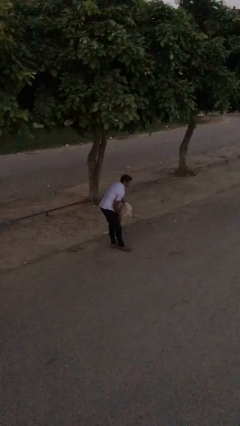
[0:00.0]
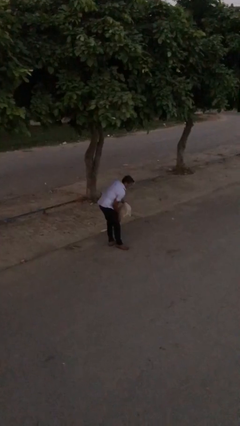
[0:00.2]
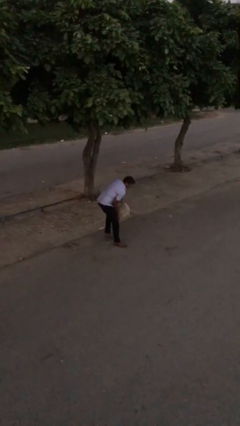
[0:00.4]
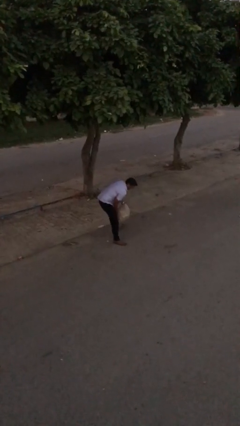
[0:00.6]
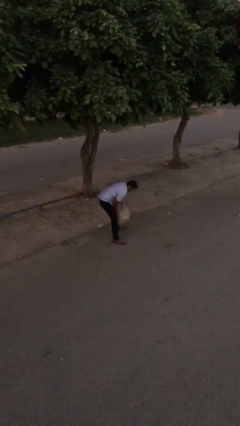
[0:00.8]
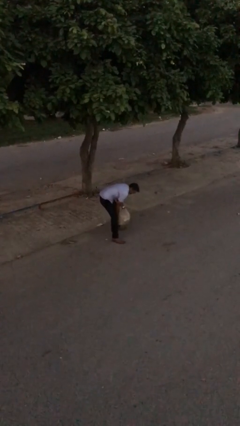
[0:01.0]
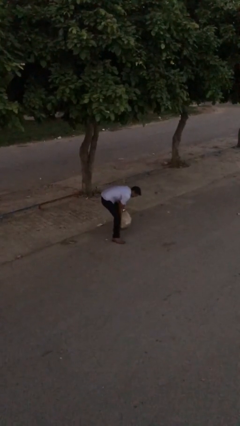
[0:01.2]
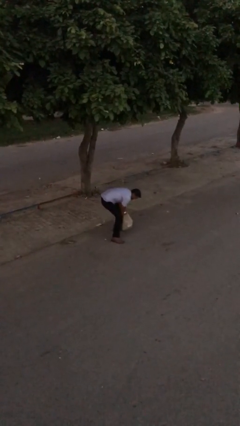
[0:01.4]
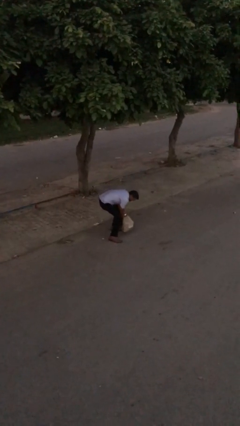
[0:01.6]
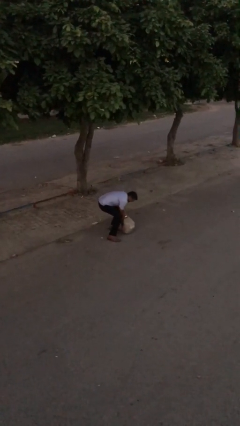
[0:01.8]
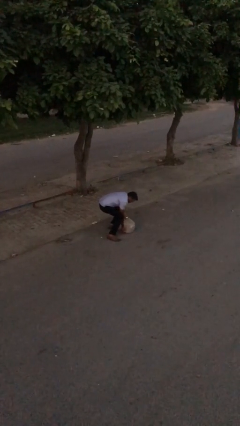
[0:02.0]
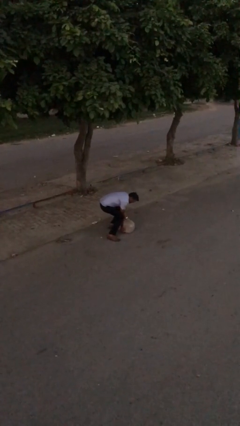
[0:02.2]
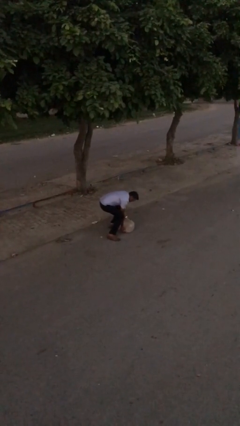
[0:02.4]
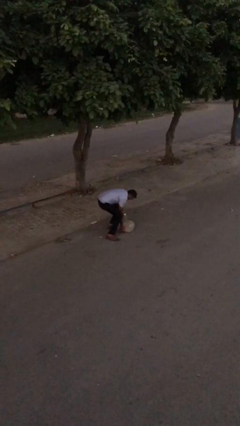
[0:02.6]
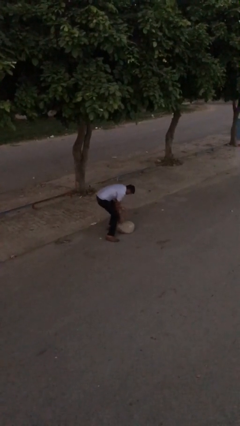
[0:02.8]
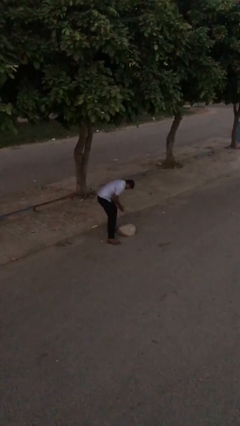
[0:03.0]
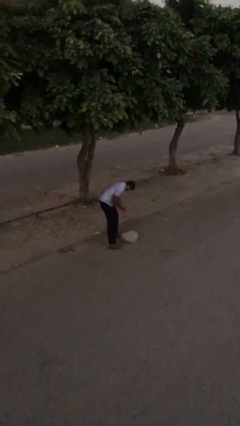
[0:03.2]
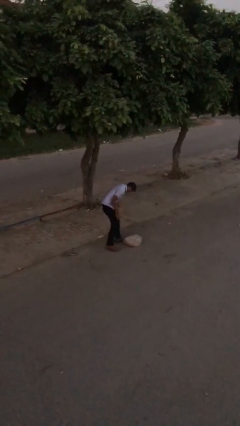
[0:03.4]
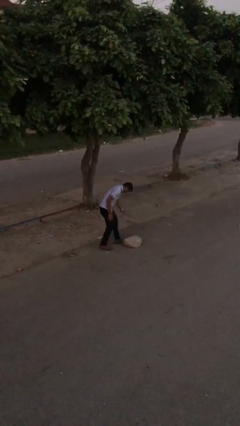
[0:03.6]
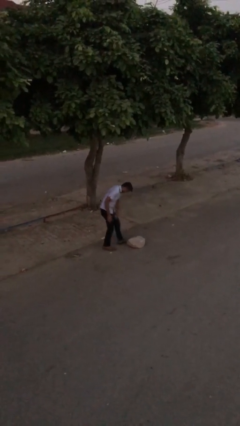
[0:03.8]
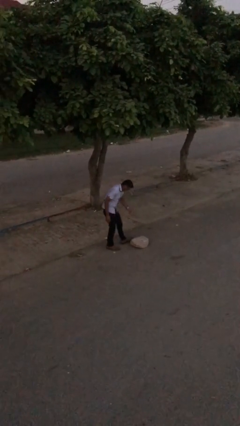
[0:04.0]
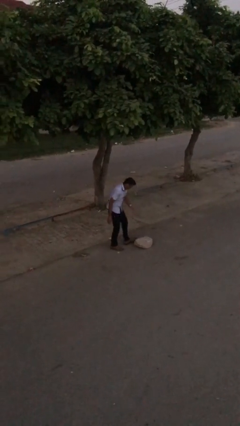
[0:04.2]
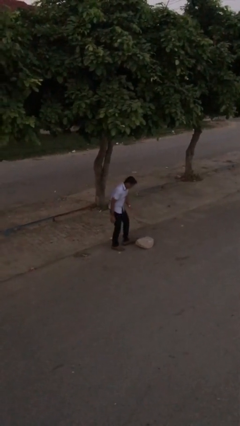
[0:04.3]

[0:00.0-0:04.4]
person puts down object on floor

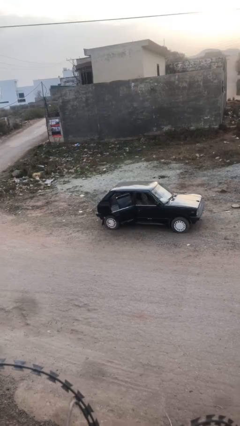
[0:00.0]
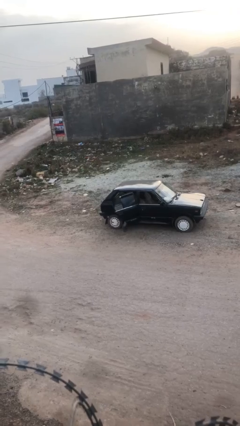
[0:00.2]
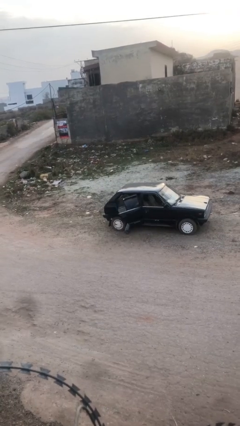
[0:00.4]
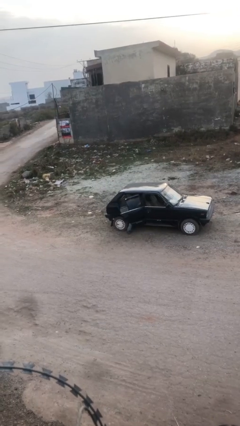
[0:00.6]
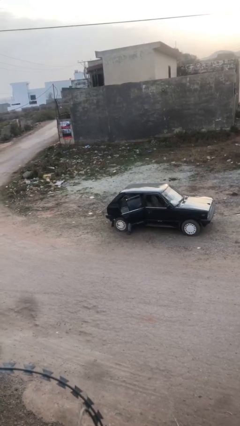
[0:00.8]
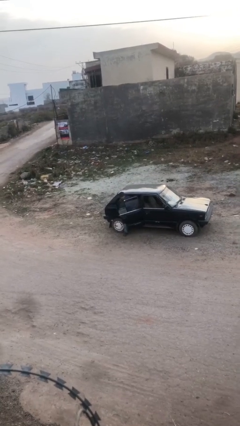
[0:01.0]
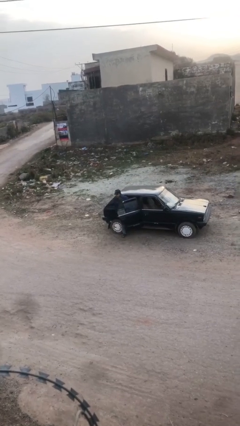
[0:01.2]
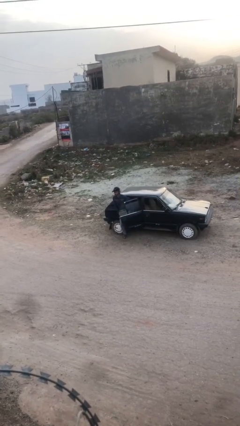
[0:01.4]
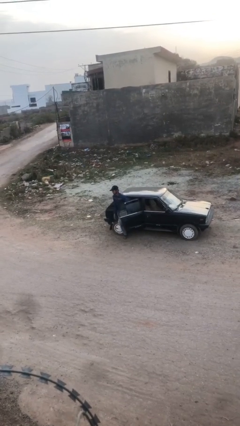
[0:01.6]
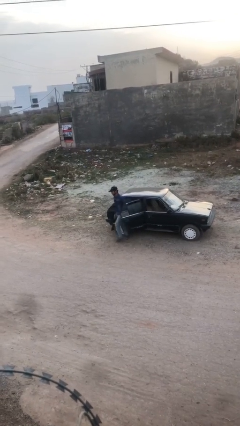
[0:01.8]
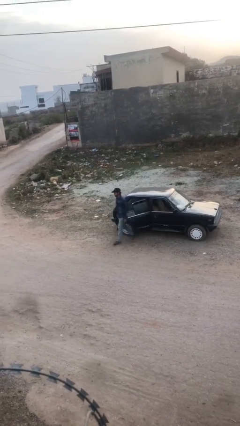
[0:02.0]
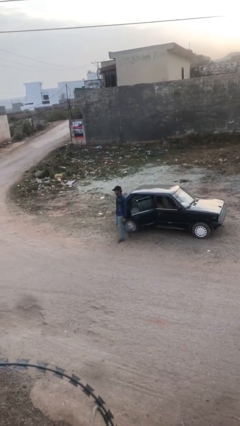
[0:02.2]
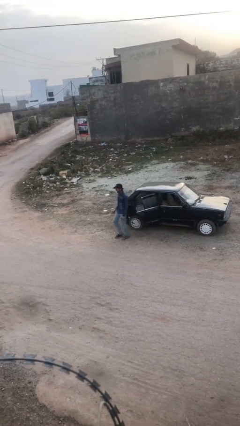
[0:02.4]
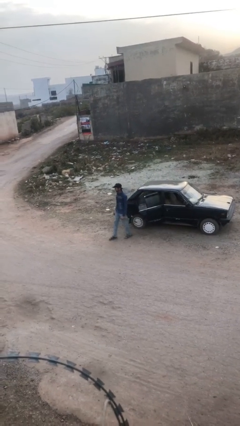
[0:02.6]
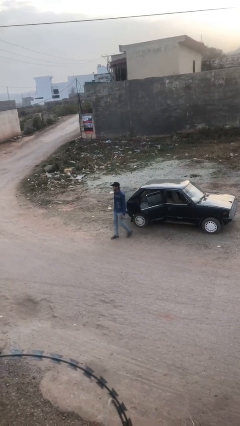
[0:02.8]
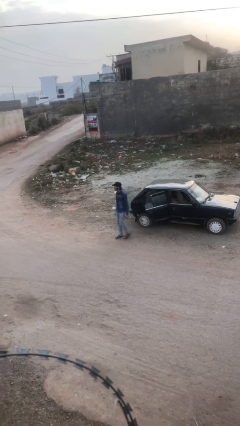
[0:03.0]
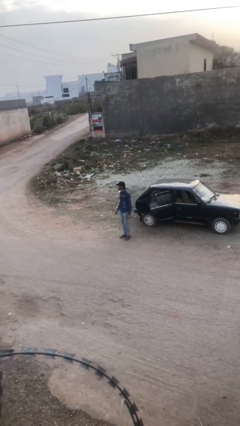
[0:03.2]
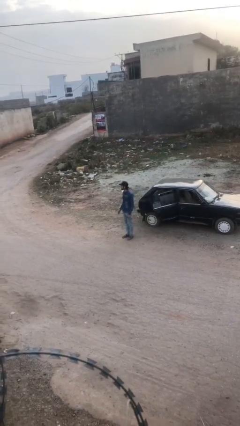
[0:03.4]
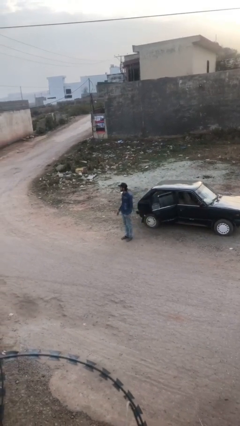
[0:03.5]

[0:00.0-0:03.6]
person exits car

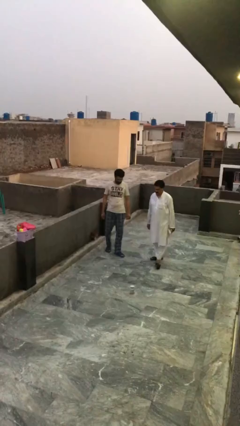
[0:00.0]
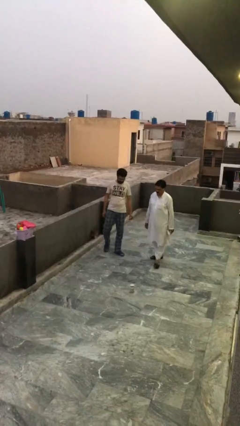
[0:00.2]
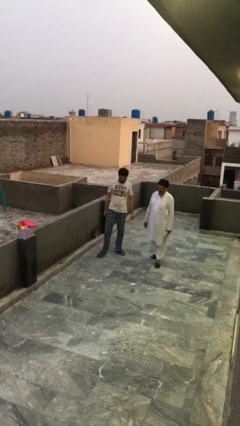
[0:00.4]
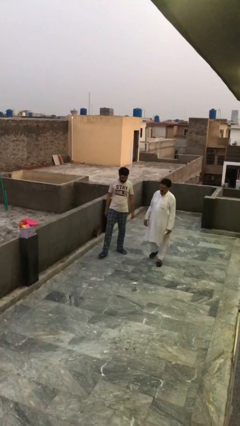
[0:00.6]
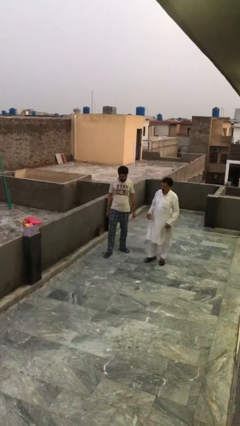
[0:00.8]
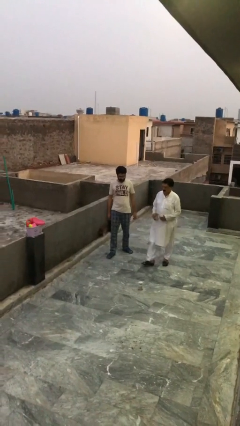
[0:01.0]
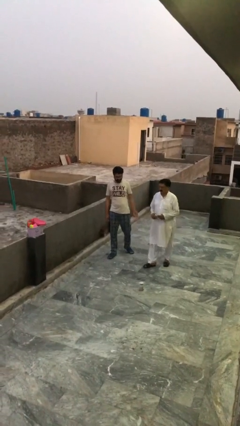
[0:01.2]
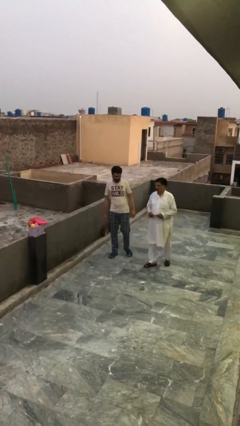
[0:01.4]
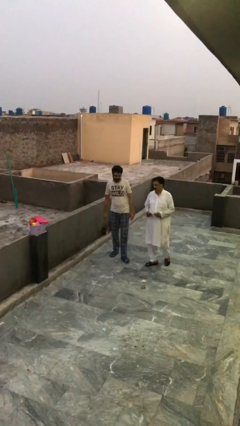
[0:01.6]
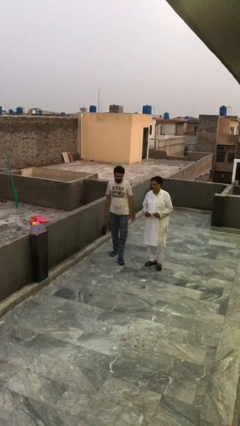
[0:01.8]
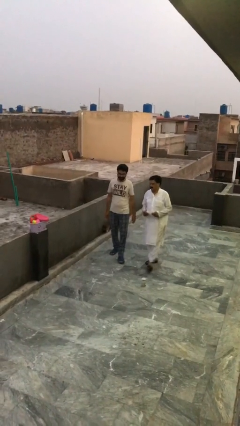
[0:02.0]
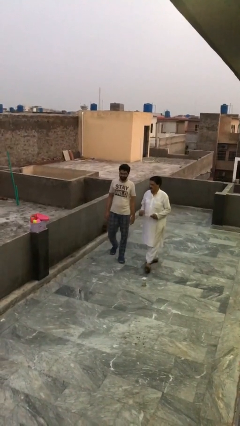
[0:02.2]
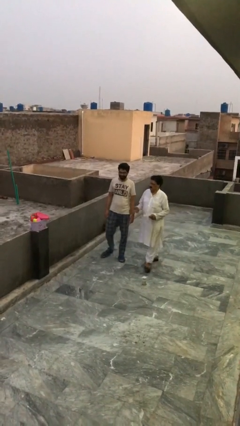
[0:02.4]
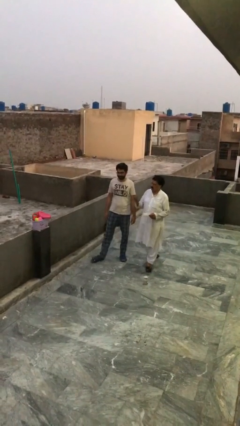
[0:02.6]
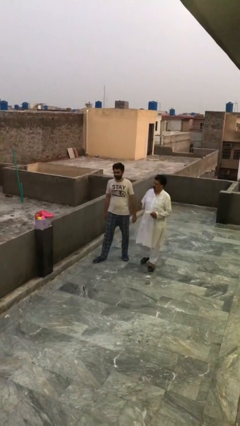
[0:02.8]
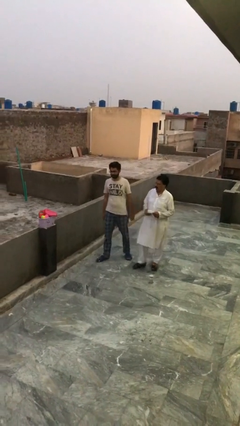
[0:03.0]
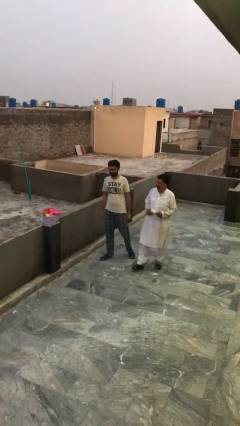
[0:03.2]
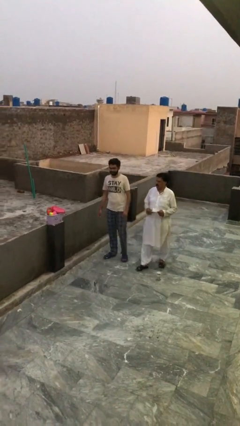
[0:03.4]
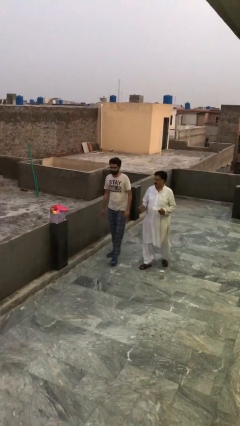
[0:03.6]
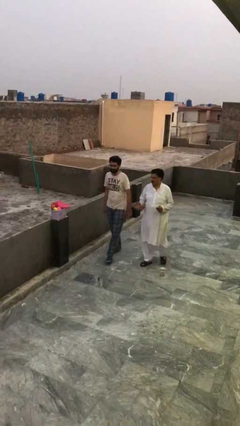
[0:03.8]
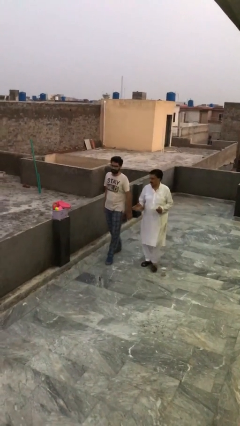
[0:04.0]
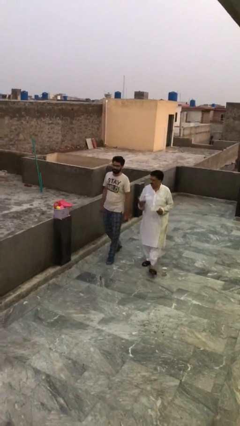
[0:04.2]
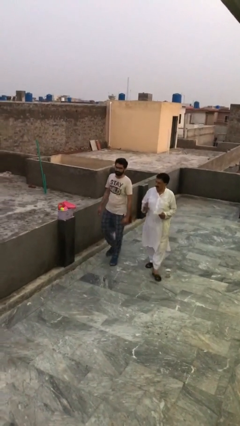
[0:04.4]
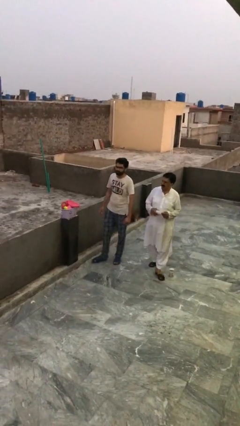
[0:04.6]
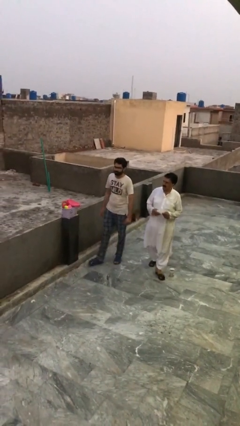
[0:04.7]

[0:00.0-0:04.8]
person talks to person

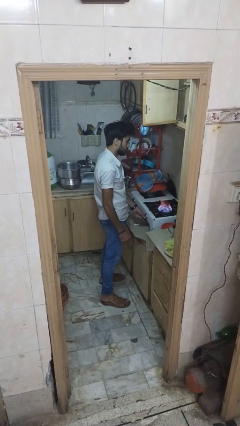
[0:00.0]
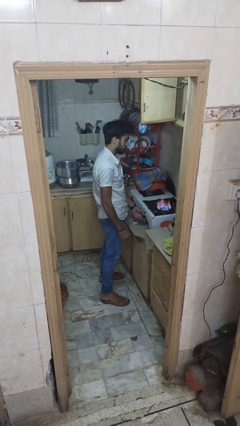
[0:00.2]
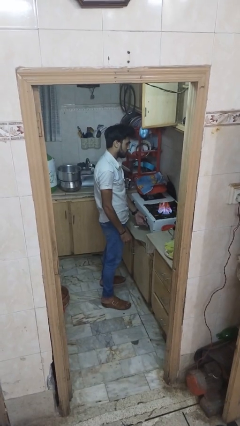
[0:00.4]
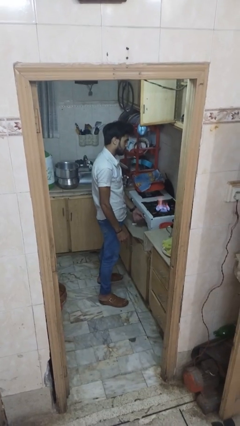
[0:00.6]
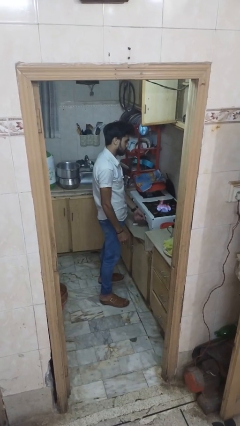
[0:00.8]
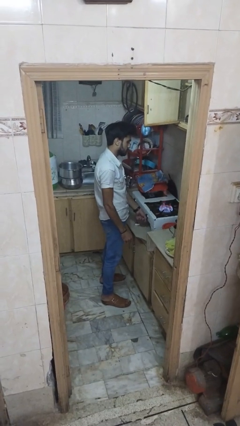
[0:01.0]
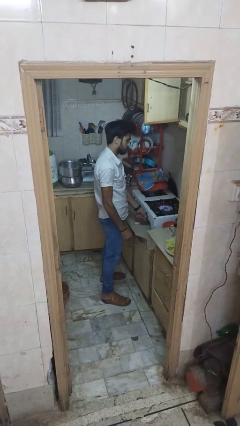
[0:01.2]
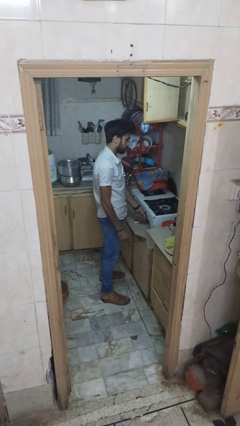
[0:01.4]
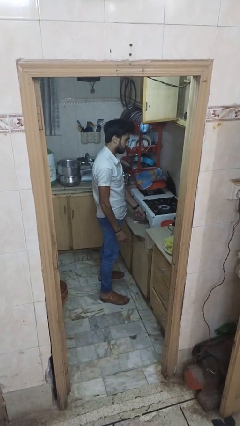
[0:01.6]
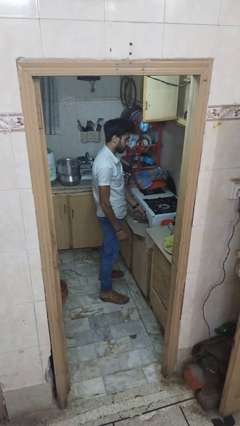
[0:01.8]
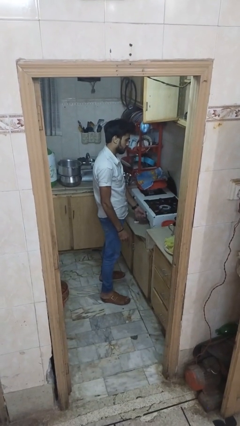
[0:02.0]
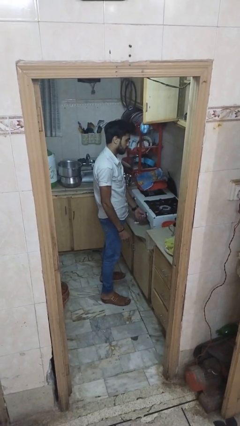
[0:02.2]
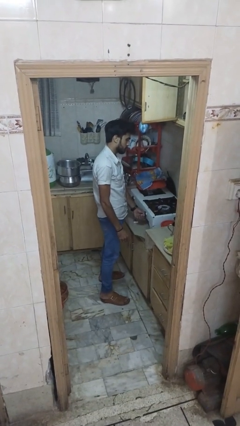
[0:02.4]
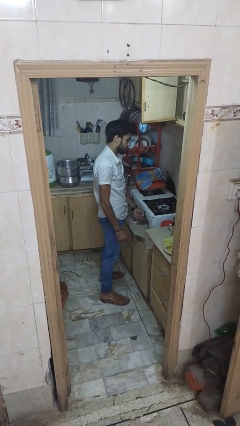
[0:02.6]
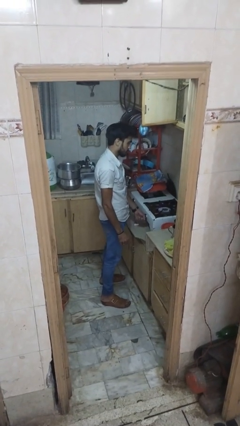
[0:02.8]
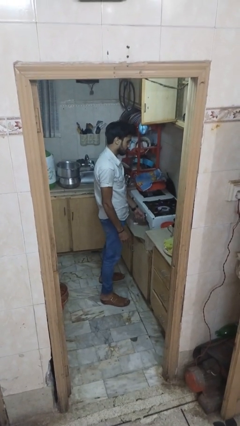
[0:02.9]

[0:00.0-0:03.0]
person turns off stovetop

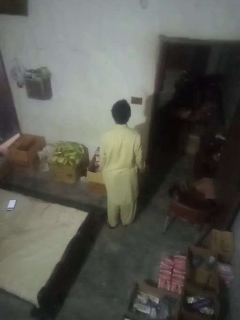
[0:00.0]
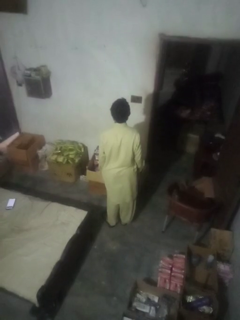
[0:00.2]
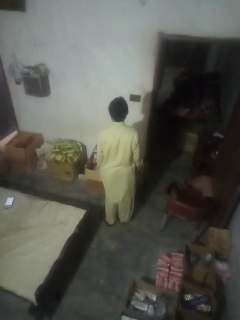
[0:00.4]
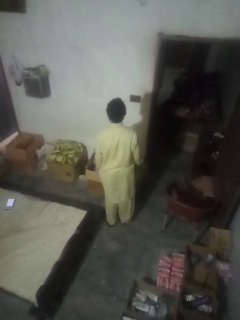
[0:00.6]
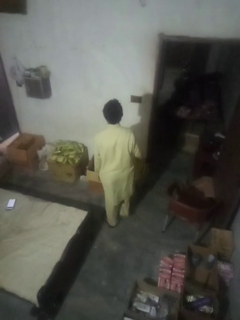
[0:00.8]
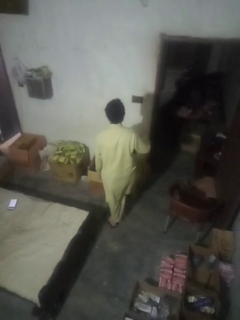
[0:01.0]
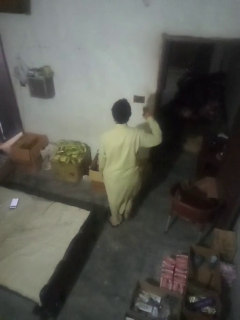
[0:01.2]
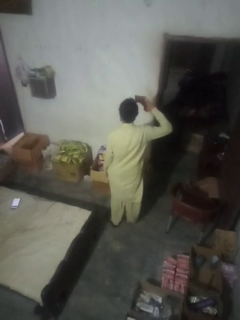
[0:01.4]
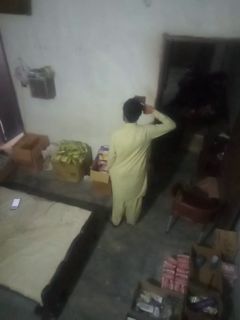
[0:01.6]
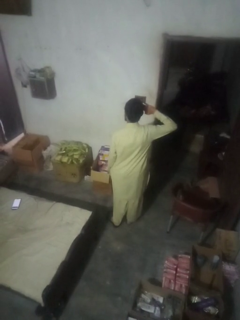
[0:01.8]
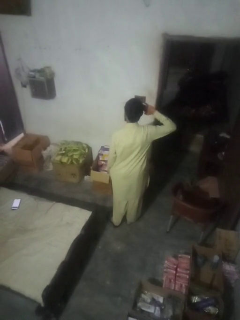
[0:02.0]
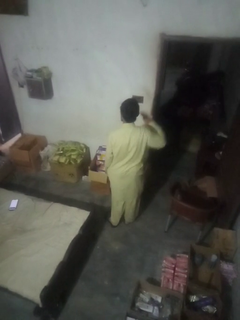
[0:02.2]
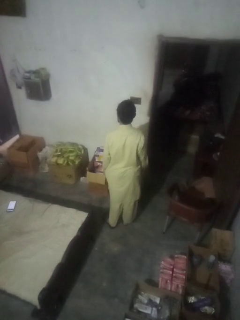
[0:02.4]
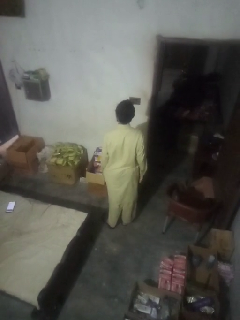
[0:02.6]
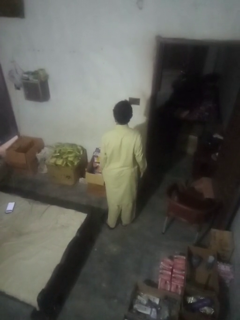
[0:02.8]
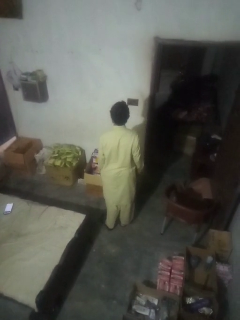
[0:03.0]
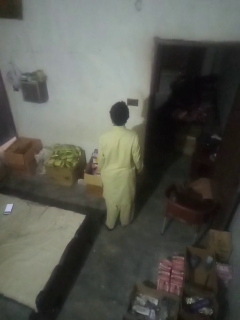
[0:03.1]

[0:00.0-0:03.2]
person salutes
